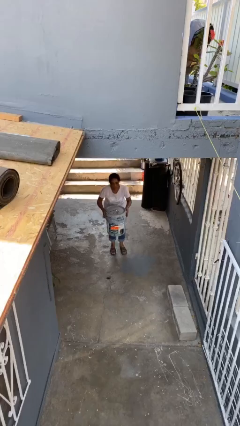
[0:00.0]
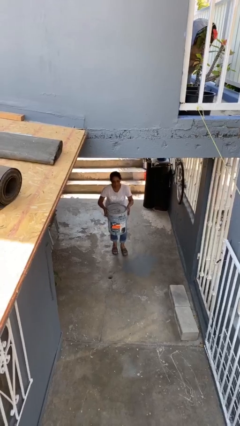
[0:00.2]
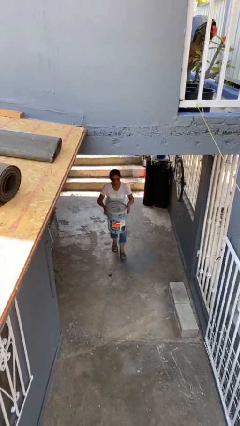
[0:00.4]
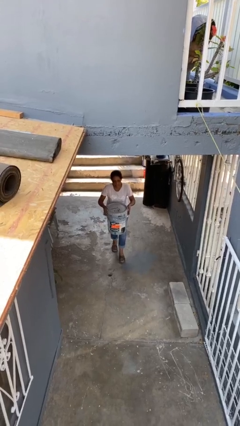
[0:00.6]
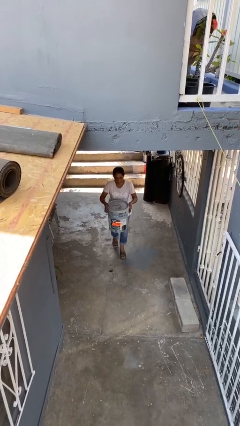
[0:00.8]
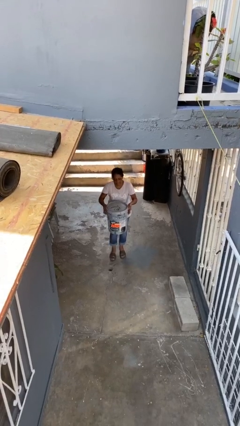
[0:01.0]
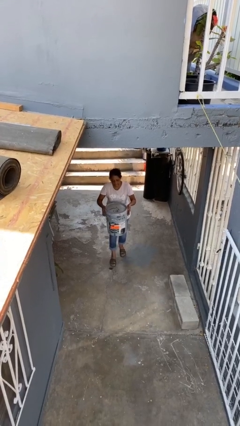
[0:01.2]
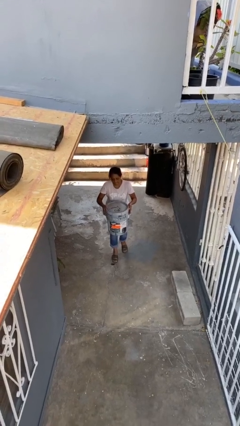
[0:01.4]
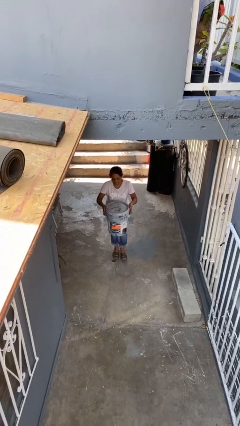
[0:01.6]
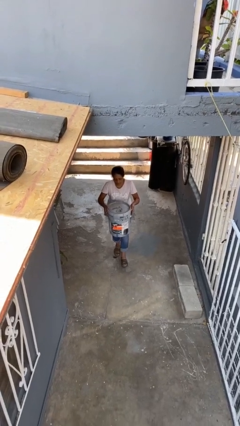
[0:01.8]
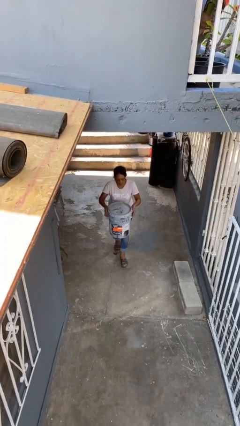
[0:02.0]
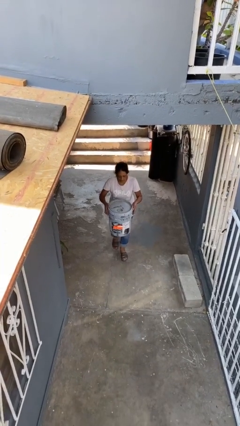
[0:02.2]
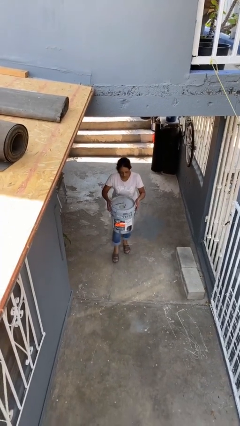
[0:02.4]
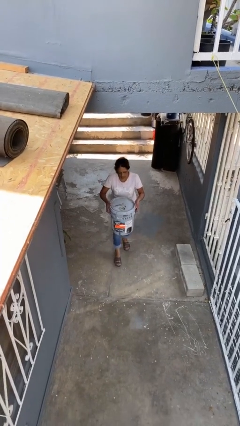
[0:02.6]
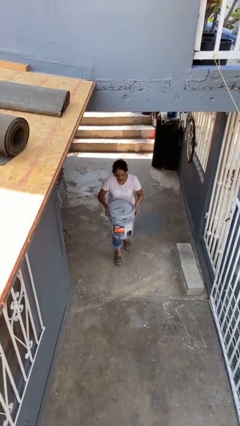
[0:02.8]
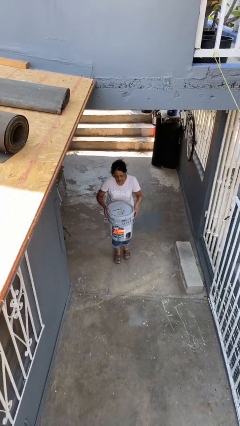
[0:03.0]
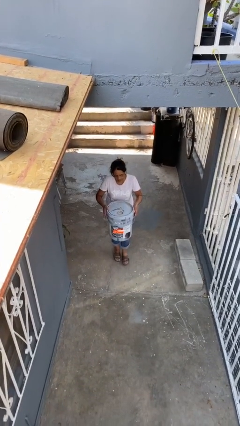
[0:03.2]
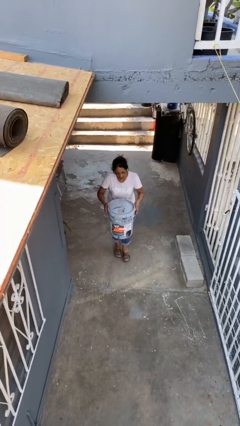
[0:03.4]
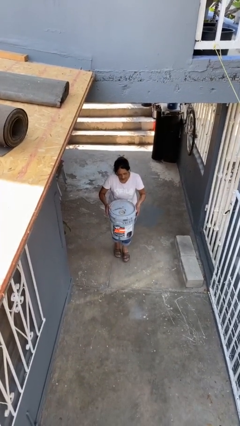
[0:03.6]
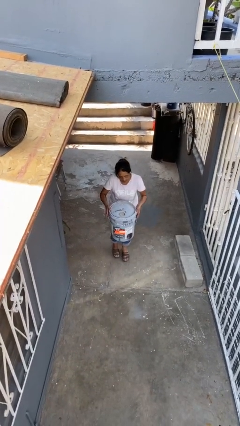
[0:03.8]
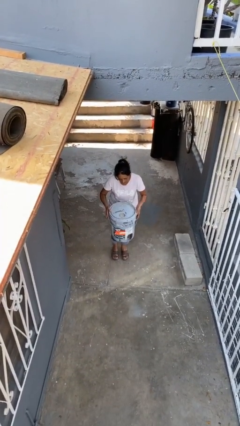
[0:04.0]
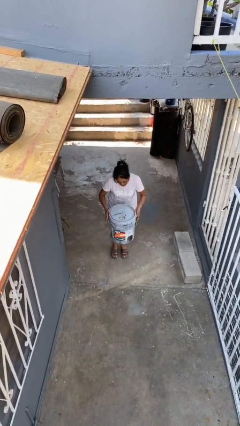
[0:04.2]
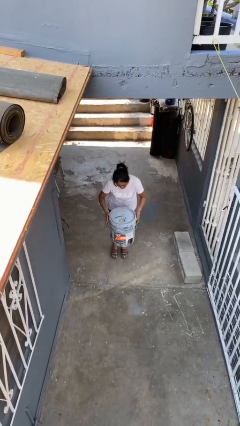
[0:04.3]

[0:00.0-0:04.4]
person carries heavy object

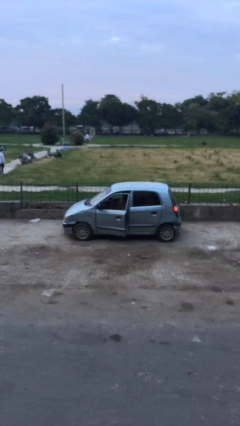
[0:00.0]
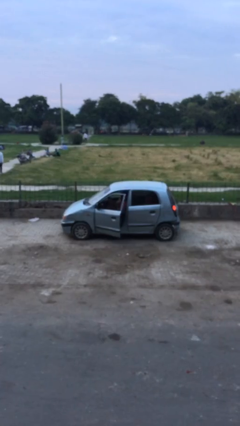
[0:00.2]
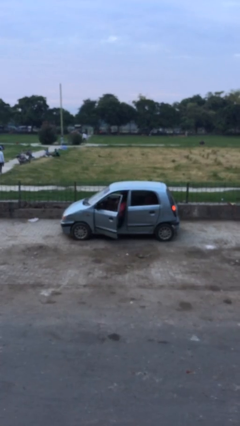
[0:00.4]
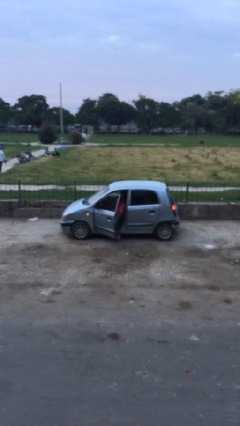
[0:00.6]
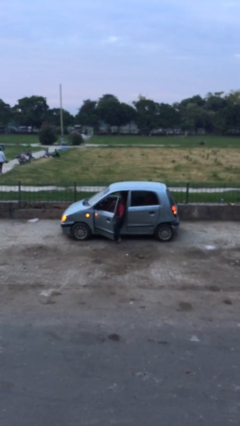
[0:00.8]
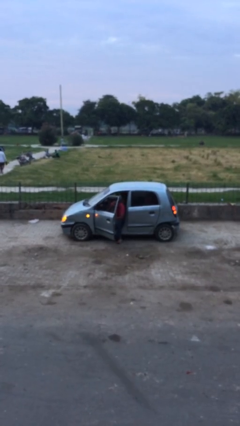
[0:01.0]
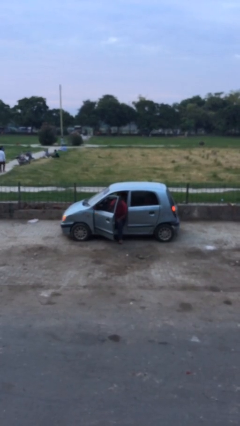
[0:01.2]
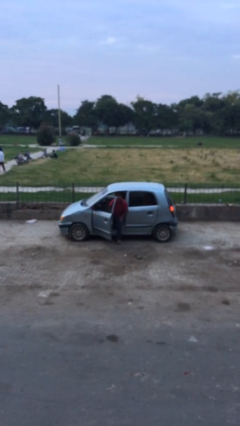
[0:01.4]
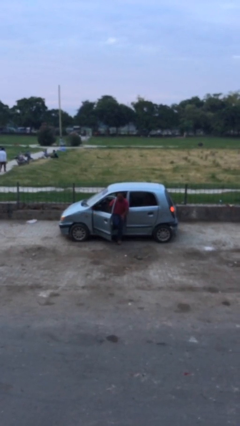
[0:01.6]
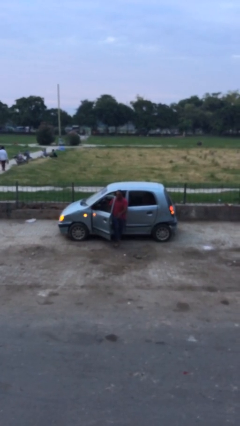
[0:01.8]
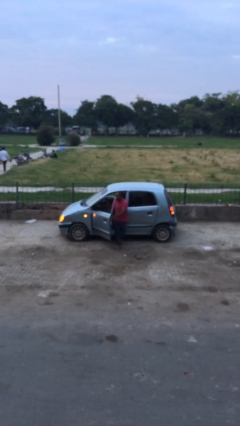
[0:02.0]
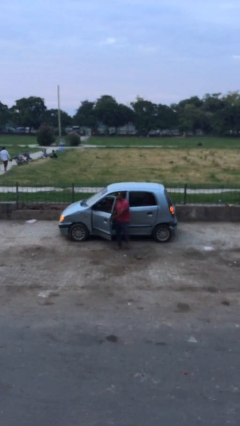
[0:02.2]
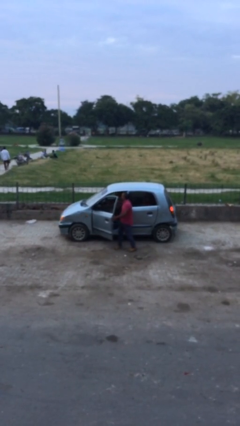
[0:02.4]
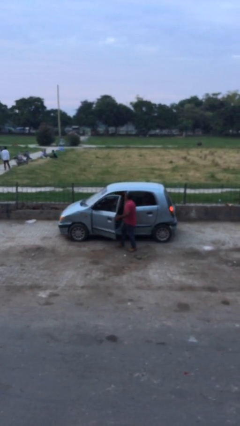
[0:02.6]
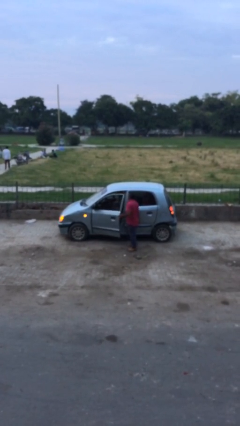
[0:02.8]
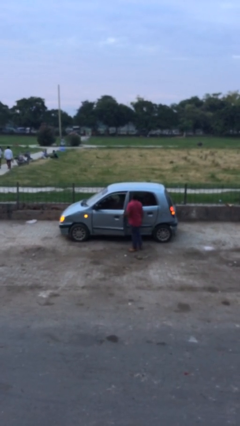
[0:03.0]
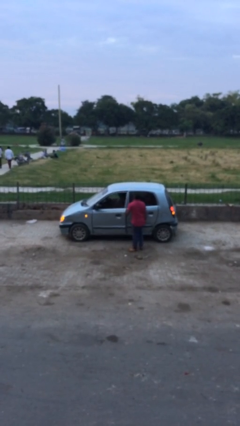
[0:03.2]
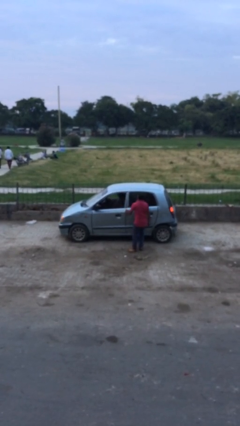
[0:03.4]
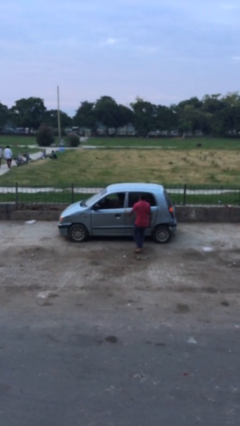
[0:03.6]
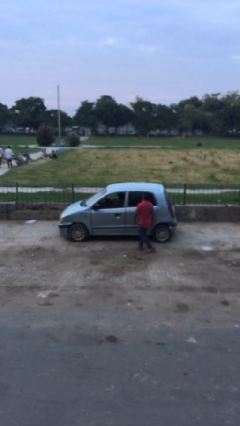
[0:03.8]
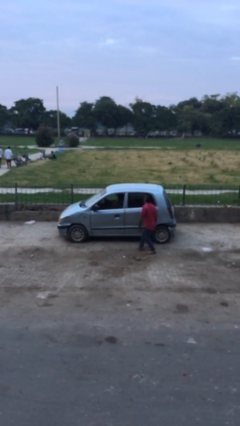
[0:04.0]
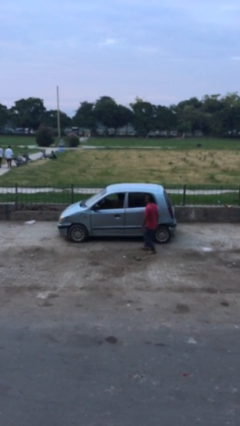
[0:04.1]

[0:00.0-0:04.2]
car drops off person

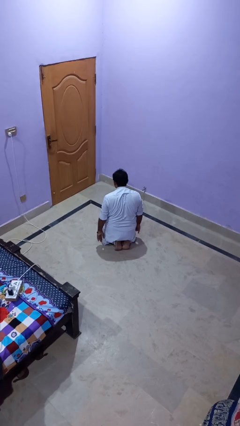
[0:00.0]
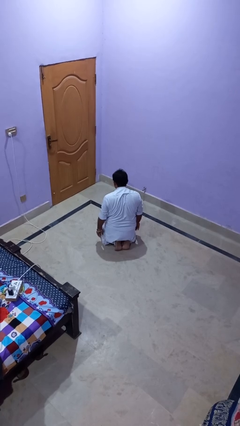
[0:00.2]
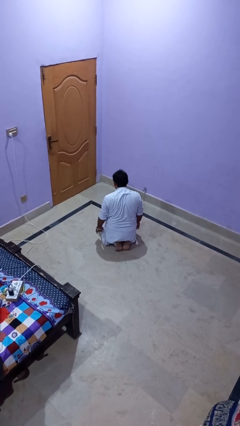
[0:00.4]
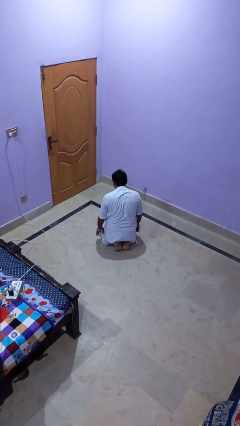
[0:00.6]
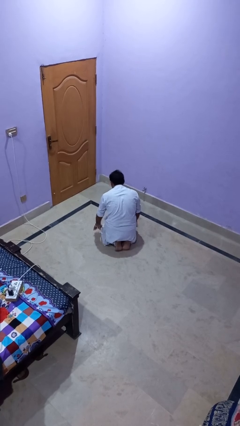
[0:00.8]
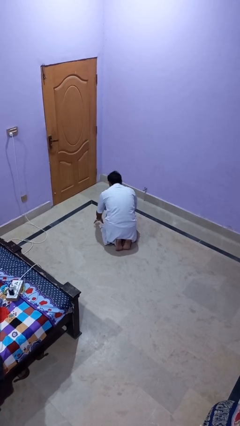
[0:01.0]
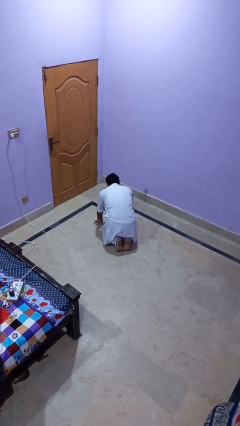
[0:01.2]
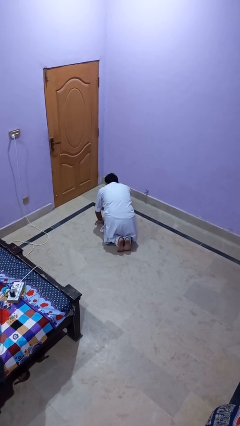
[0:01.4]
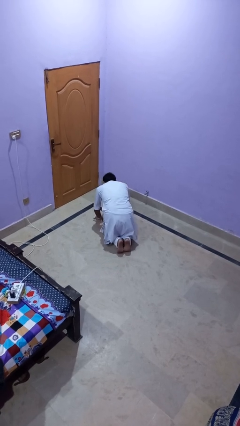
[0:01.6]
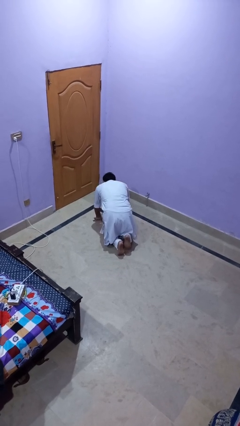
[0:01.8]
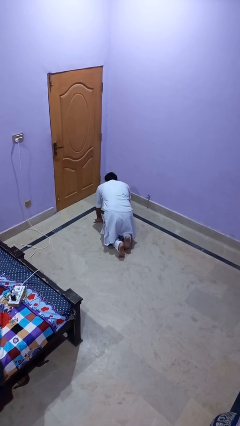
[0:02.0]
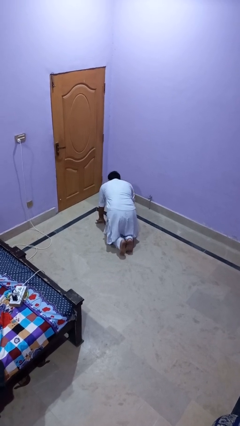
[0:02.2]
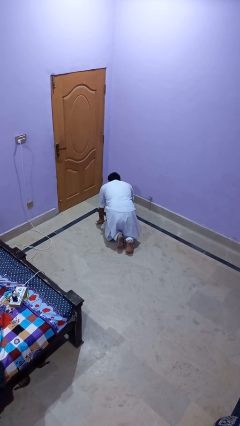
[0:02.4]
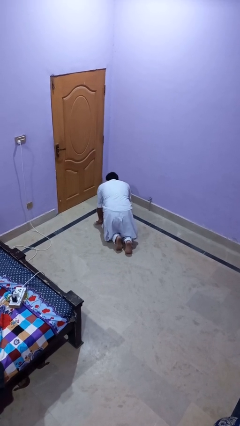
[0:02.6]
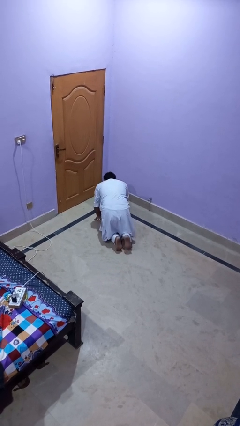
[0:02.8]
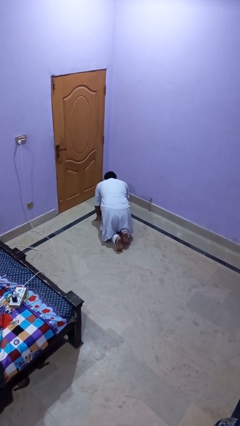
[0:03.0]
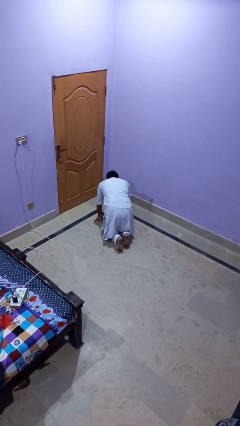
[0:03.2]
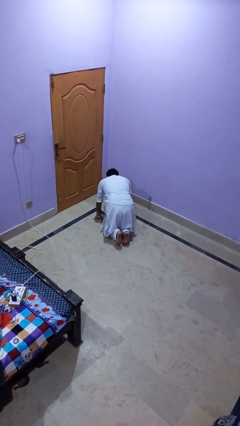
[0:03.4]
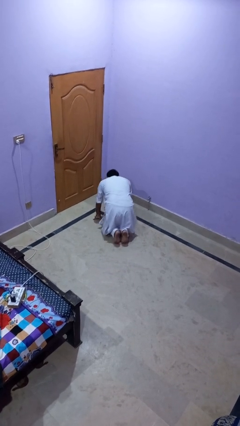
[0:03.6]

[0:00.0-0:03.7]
person crawls

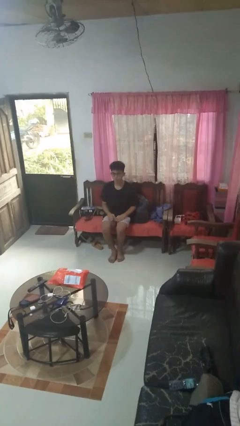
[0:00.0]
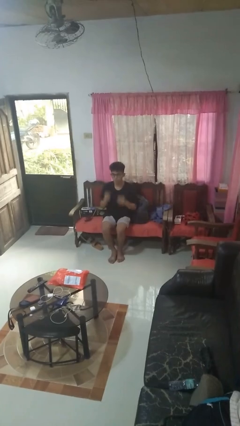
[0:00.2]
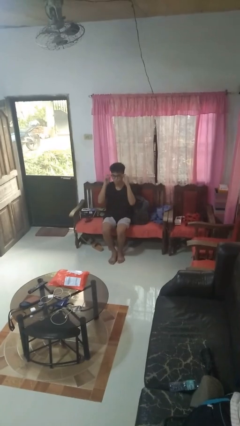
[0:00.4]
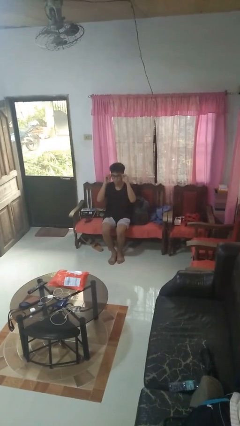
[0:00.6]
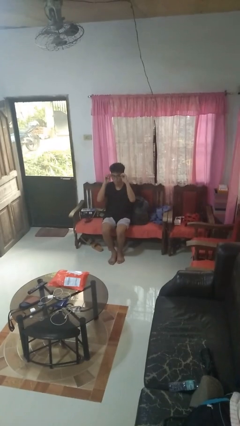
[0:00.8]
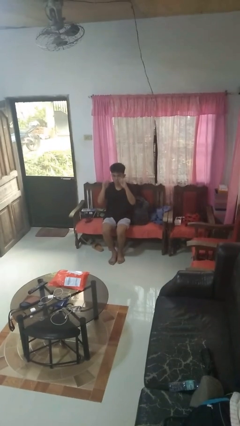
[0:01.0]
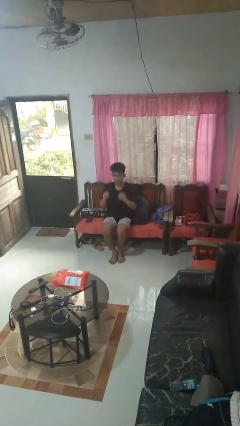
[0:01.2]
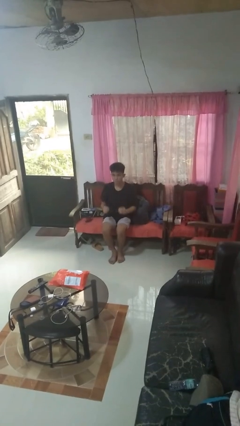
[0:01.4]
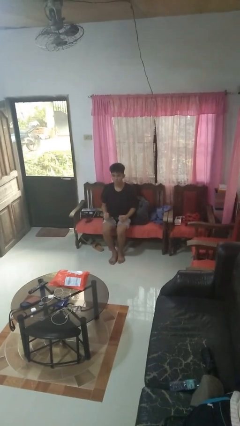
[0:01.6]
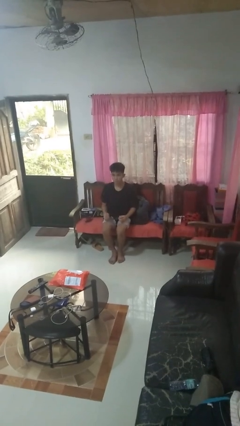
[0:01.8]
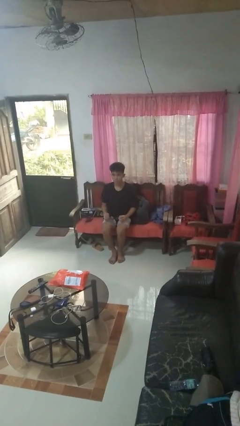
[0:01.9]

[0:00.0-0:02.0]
person takes off glasses

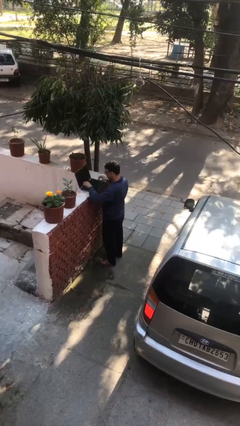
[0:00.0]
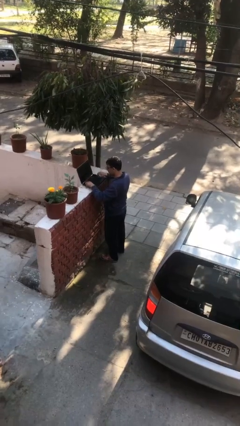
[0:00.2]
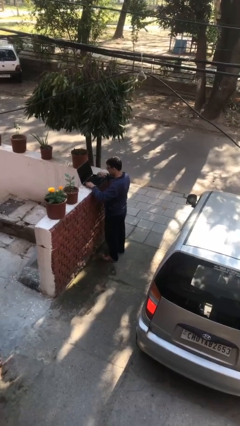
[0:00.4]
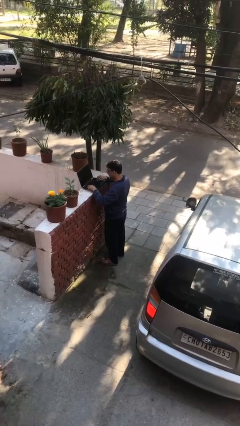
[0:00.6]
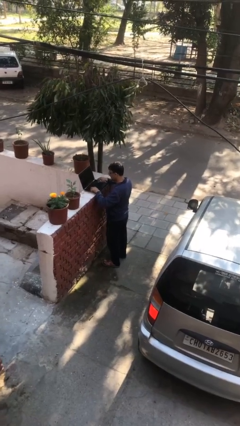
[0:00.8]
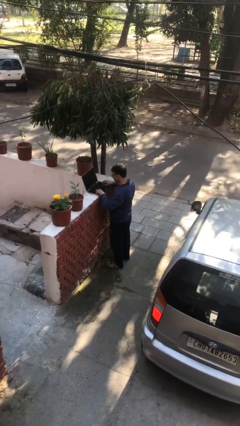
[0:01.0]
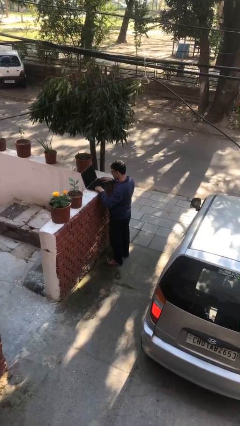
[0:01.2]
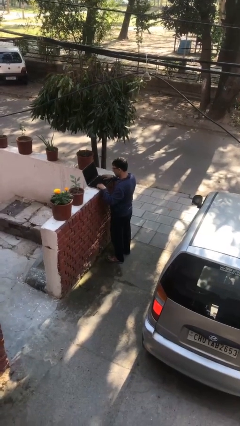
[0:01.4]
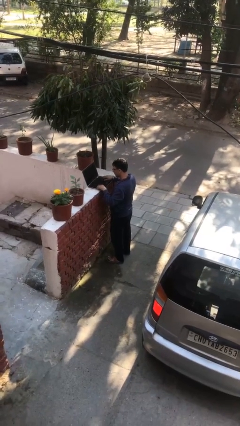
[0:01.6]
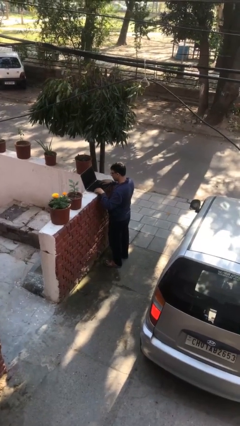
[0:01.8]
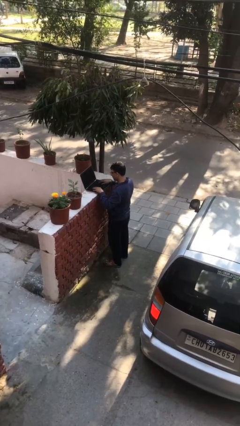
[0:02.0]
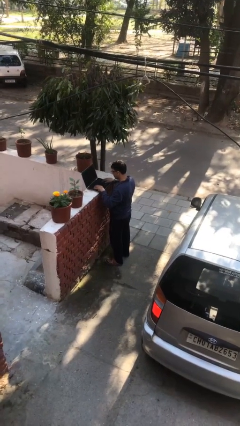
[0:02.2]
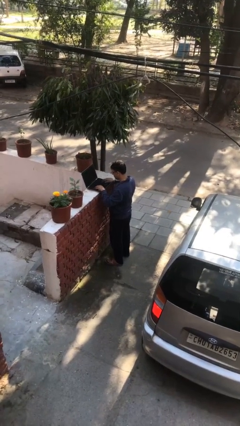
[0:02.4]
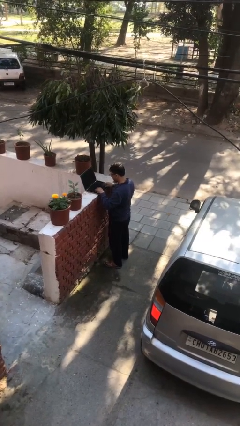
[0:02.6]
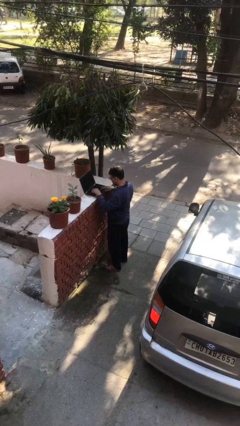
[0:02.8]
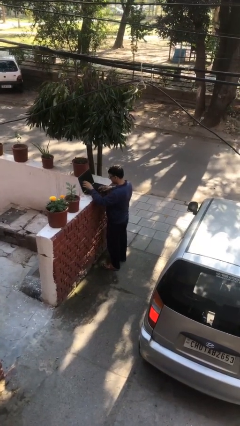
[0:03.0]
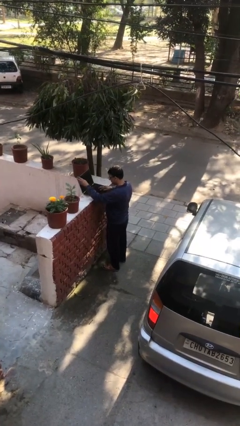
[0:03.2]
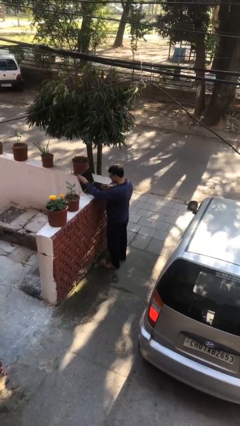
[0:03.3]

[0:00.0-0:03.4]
person interacts with laptop
